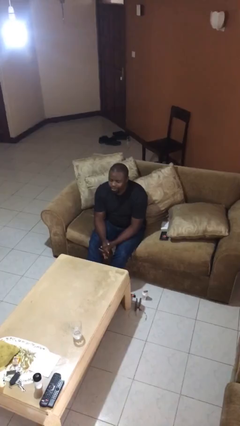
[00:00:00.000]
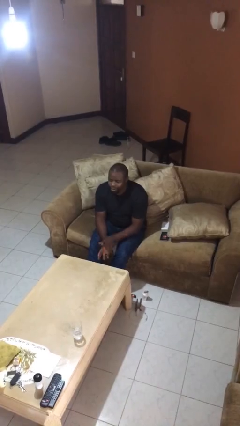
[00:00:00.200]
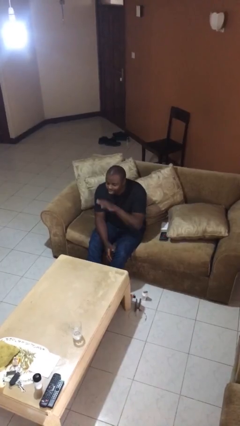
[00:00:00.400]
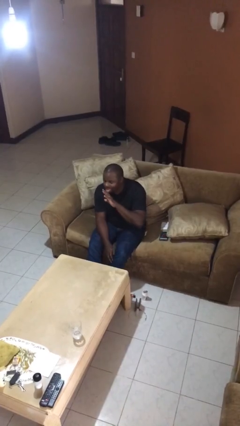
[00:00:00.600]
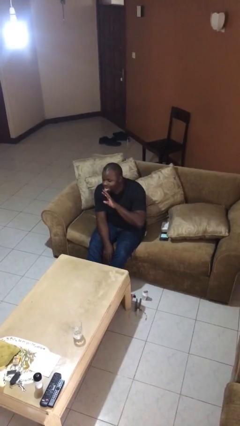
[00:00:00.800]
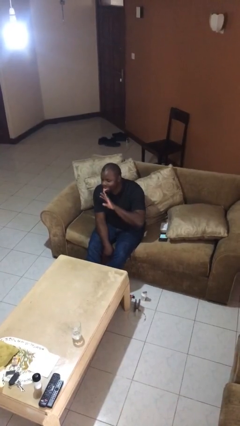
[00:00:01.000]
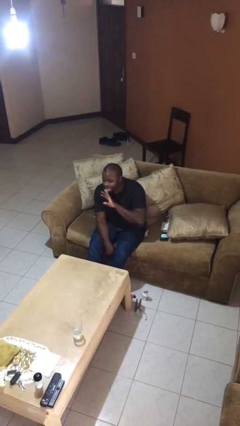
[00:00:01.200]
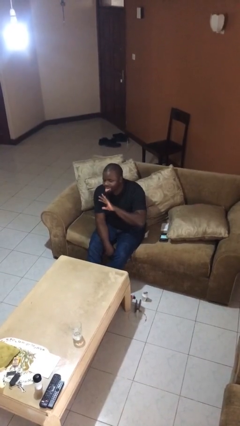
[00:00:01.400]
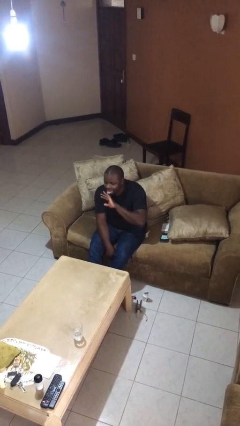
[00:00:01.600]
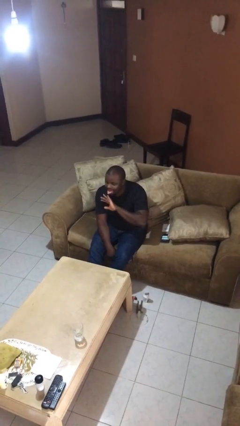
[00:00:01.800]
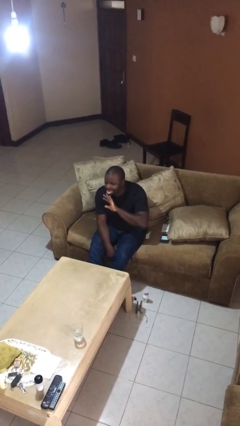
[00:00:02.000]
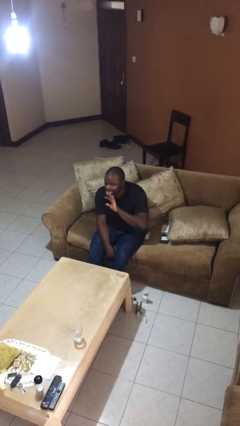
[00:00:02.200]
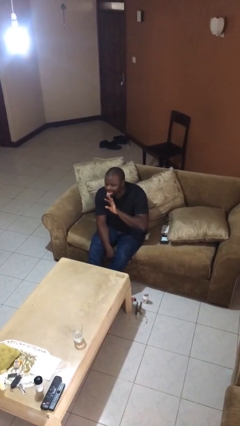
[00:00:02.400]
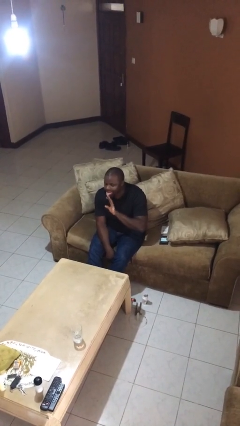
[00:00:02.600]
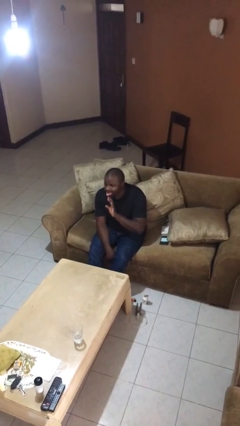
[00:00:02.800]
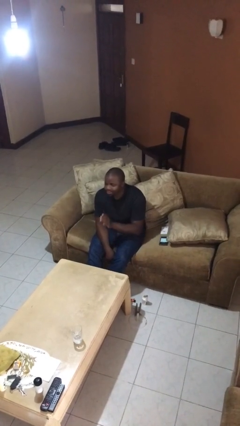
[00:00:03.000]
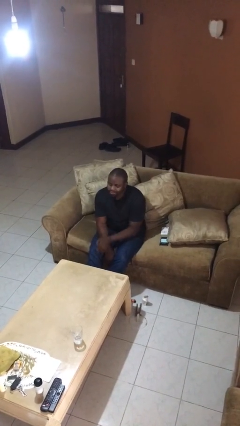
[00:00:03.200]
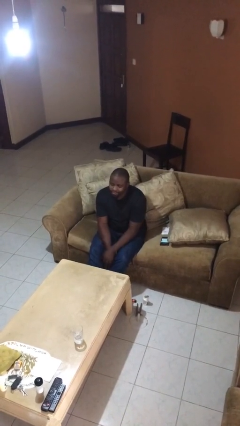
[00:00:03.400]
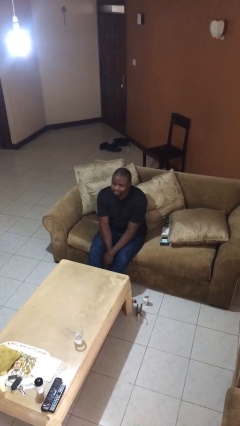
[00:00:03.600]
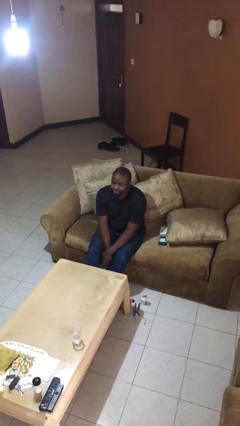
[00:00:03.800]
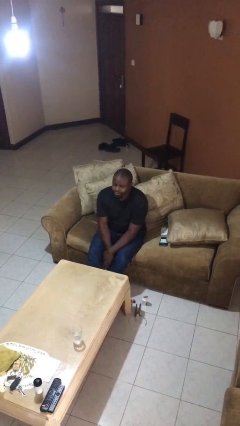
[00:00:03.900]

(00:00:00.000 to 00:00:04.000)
person licks fingers

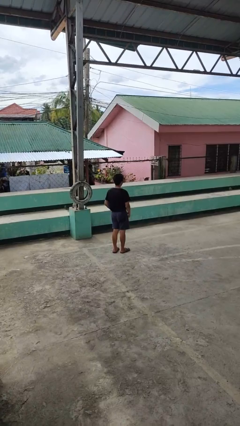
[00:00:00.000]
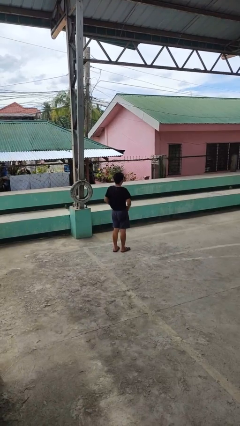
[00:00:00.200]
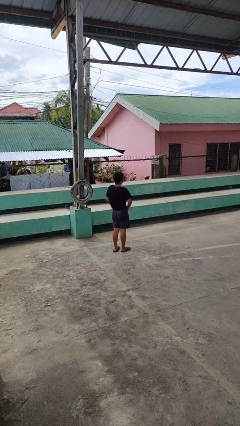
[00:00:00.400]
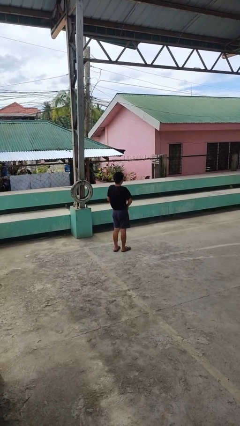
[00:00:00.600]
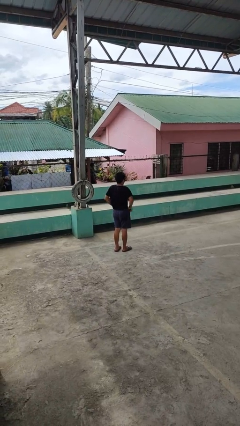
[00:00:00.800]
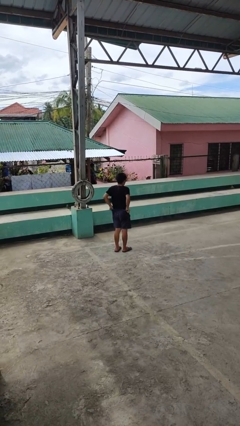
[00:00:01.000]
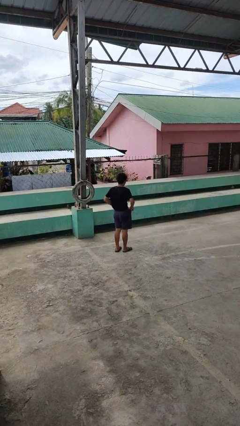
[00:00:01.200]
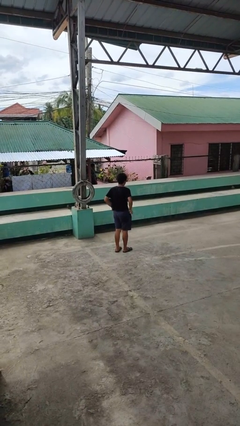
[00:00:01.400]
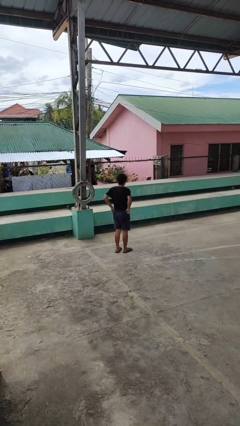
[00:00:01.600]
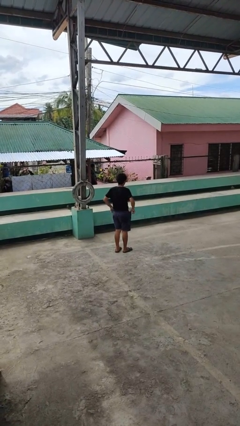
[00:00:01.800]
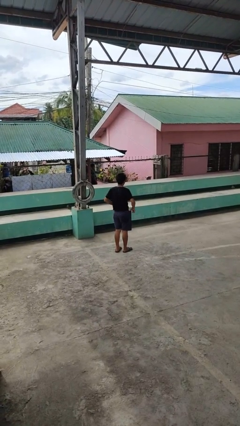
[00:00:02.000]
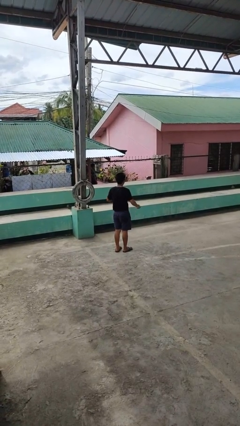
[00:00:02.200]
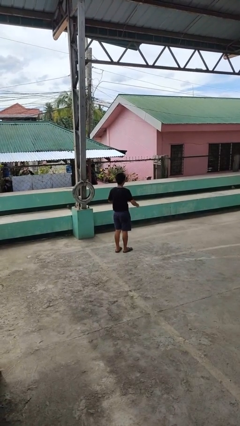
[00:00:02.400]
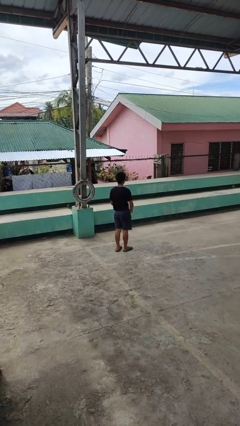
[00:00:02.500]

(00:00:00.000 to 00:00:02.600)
person hikes up pants

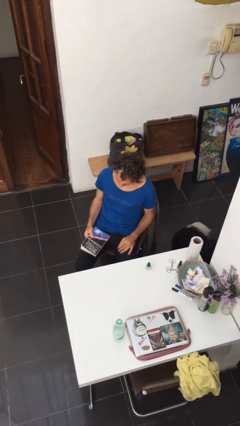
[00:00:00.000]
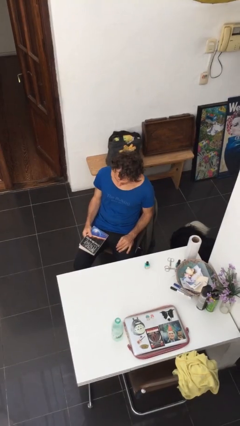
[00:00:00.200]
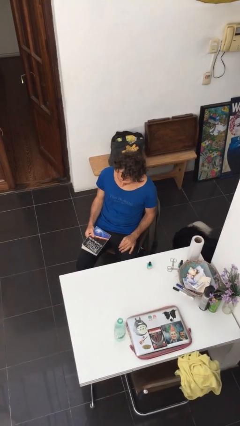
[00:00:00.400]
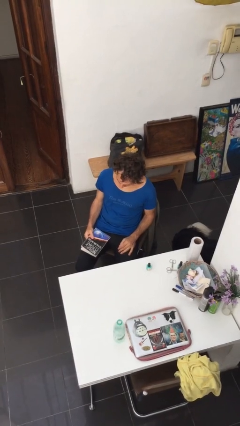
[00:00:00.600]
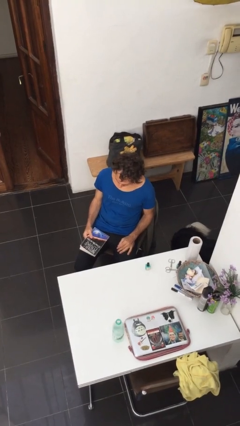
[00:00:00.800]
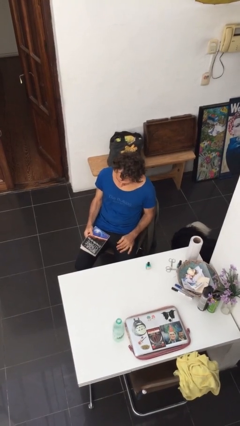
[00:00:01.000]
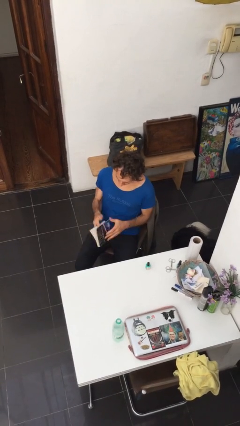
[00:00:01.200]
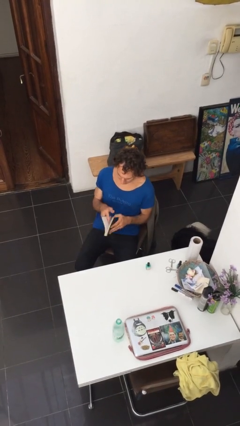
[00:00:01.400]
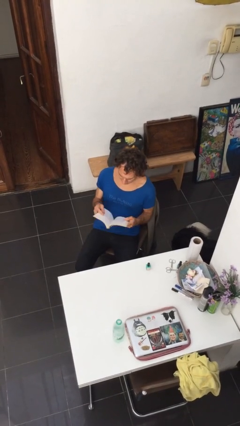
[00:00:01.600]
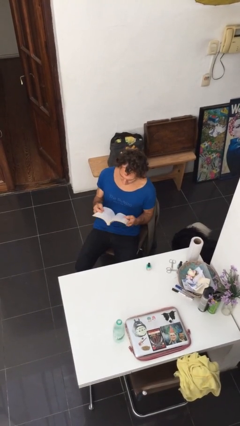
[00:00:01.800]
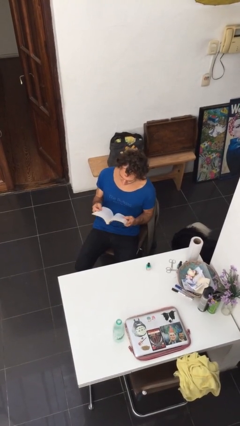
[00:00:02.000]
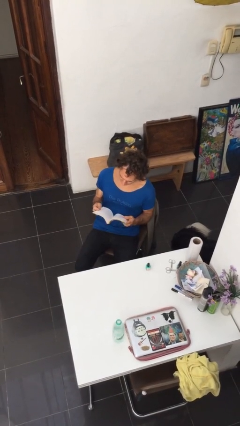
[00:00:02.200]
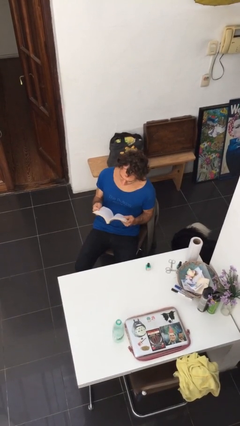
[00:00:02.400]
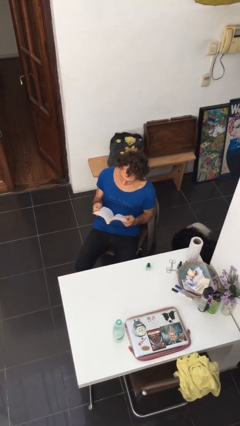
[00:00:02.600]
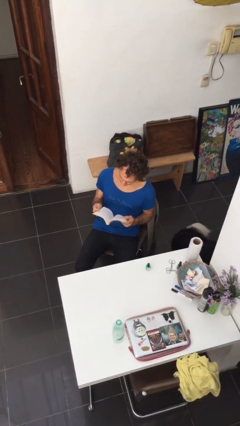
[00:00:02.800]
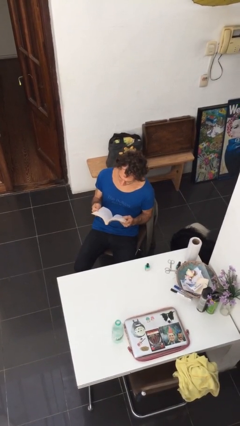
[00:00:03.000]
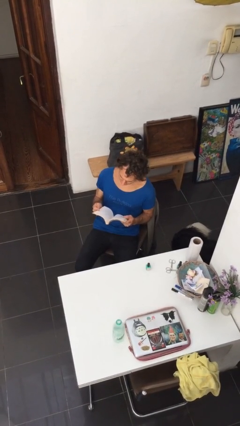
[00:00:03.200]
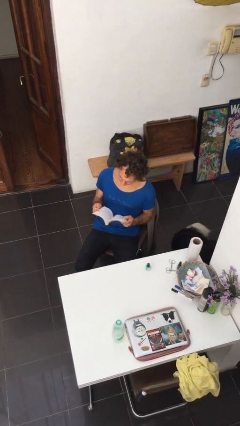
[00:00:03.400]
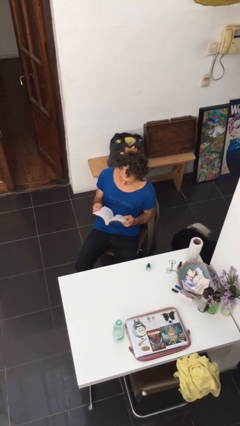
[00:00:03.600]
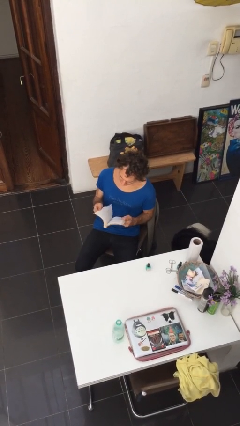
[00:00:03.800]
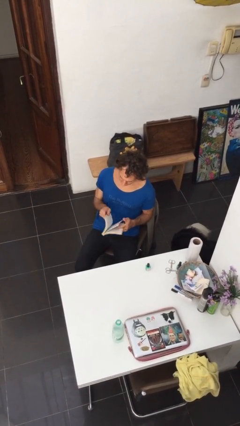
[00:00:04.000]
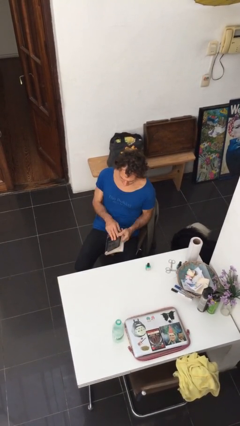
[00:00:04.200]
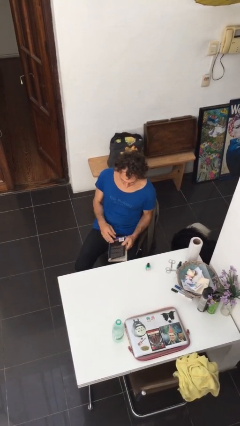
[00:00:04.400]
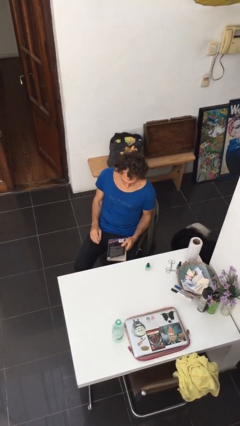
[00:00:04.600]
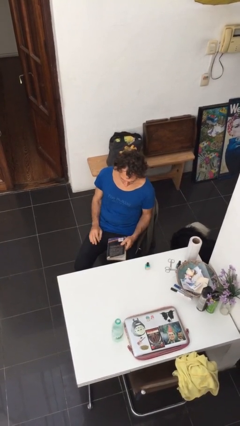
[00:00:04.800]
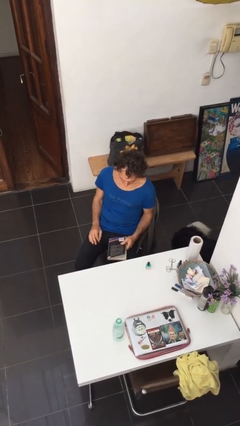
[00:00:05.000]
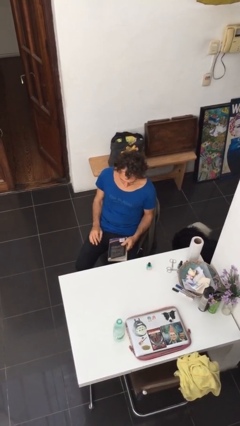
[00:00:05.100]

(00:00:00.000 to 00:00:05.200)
person reads document

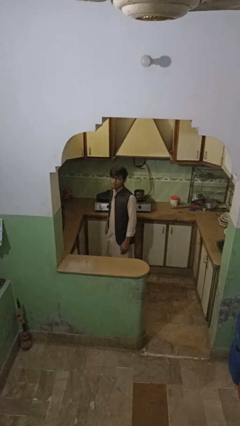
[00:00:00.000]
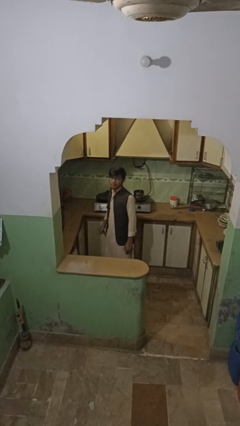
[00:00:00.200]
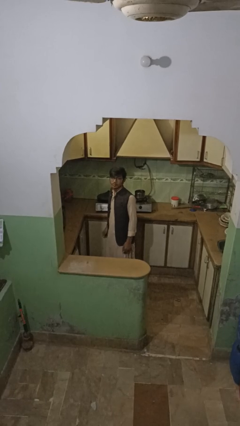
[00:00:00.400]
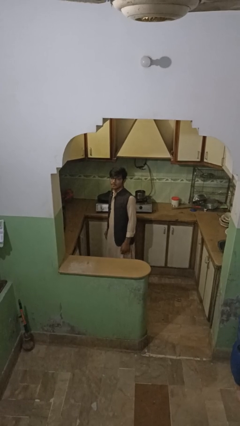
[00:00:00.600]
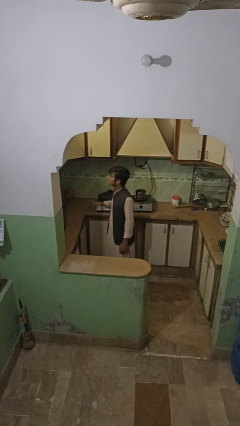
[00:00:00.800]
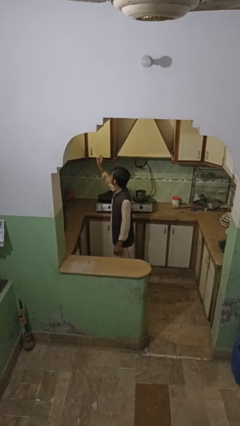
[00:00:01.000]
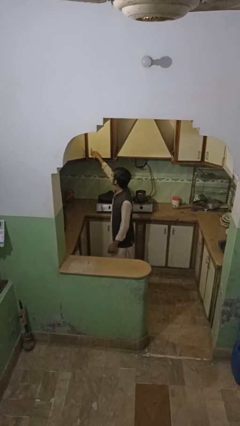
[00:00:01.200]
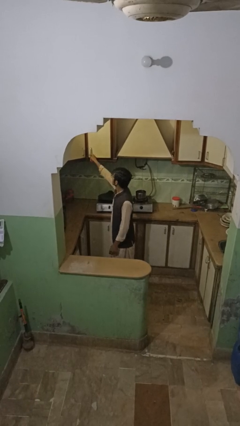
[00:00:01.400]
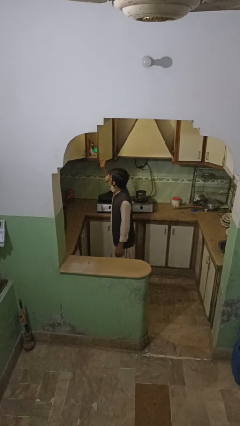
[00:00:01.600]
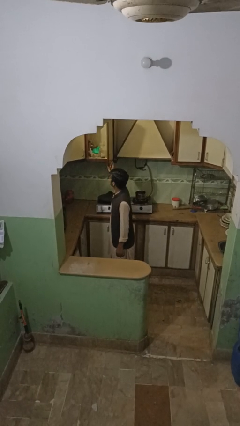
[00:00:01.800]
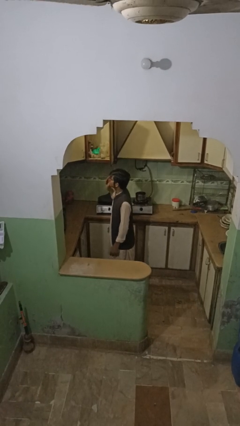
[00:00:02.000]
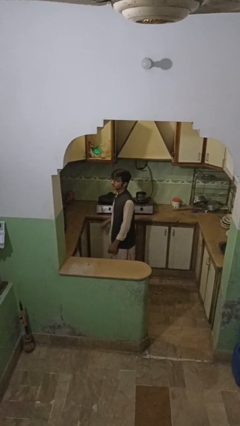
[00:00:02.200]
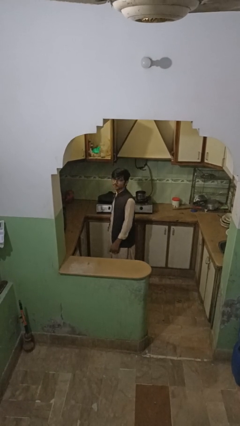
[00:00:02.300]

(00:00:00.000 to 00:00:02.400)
person opens cabinet

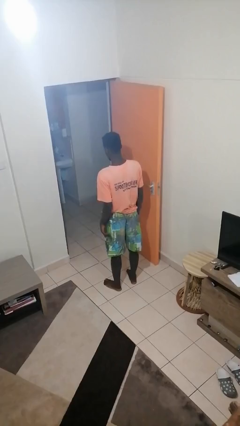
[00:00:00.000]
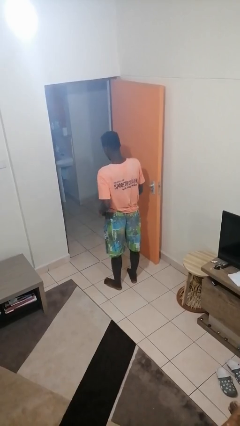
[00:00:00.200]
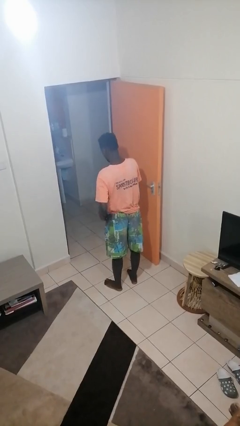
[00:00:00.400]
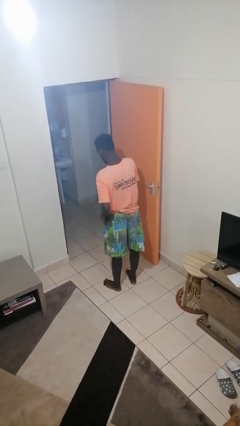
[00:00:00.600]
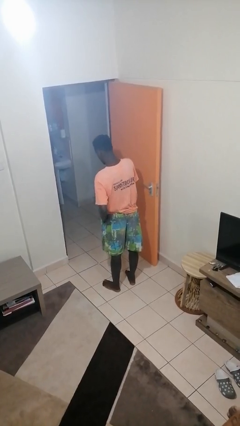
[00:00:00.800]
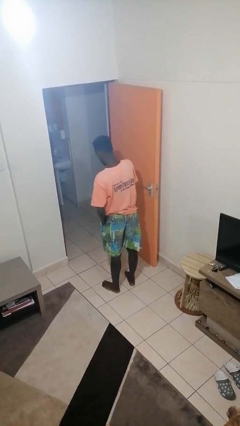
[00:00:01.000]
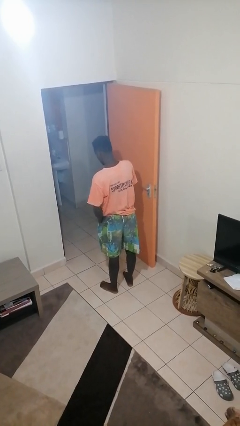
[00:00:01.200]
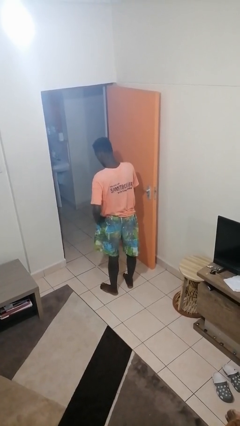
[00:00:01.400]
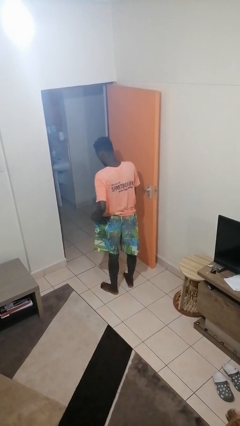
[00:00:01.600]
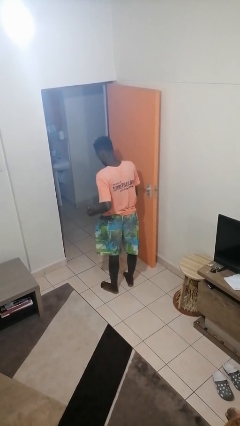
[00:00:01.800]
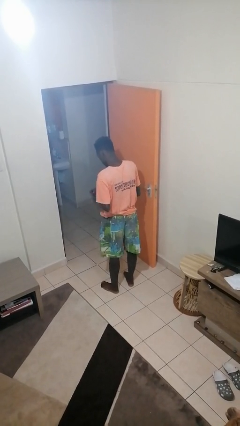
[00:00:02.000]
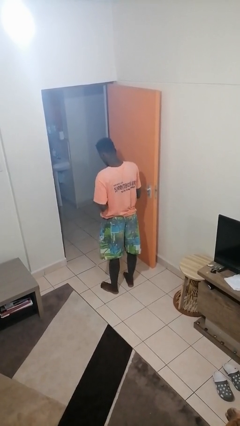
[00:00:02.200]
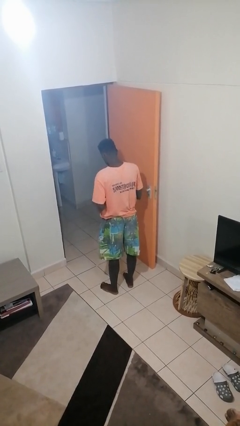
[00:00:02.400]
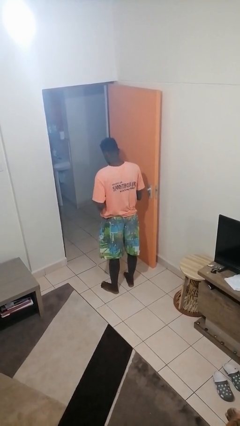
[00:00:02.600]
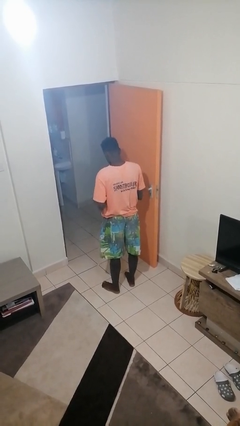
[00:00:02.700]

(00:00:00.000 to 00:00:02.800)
person takes phone from pocket
